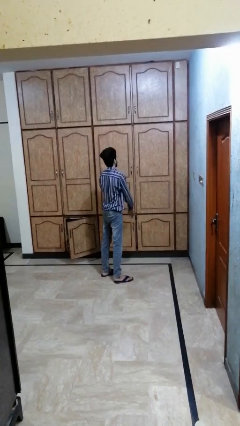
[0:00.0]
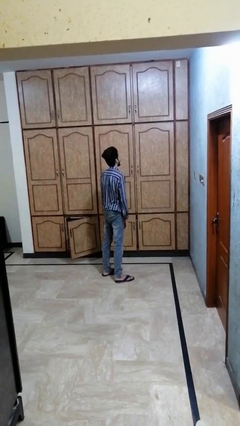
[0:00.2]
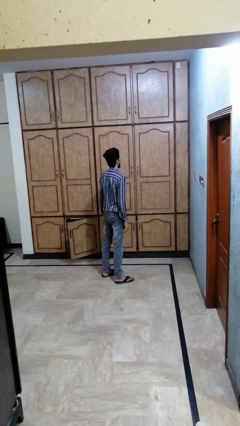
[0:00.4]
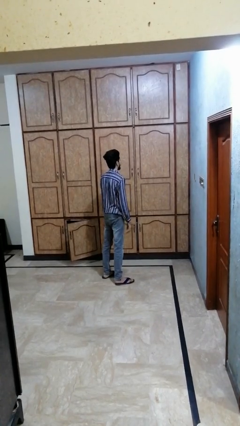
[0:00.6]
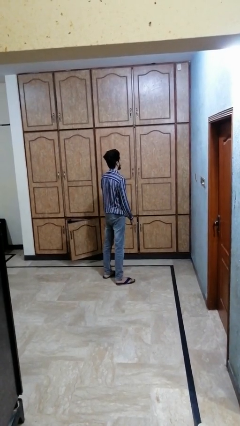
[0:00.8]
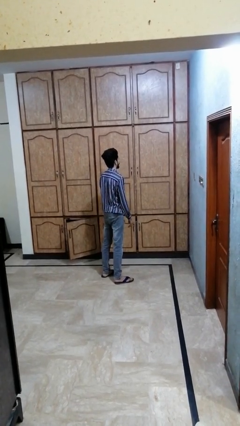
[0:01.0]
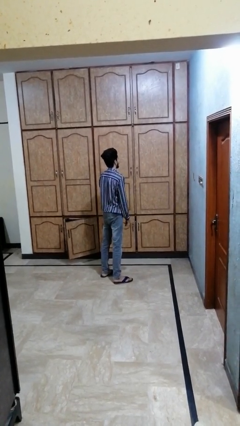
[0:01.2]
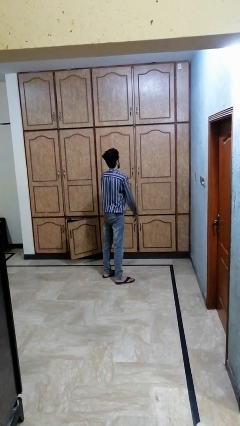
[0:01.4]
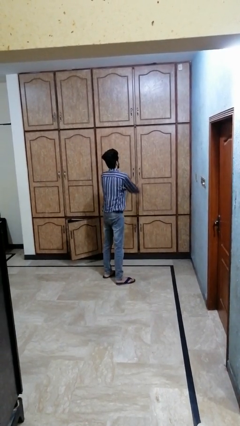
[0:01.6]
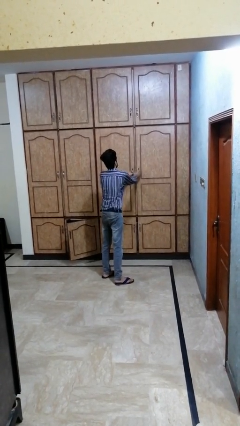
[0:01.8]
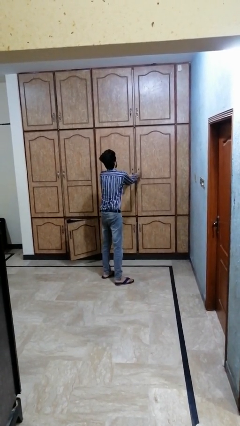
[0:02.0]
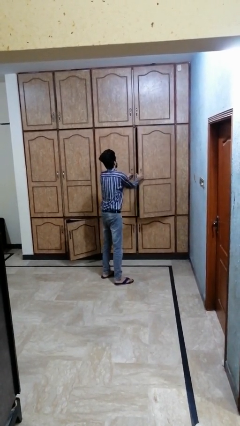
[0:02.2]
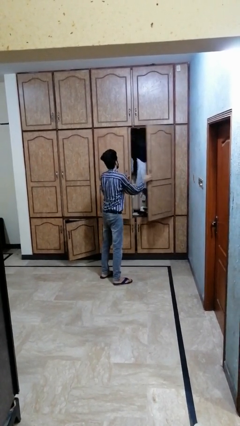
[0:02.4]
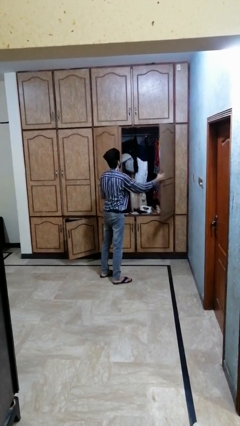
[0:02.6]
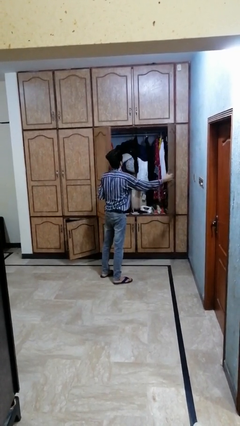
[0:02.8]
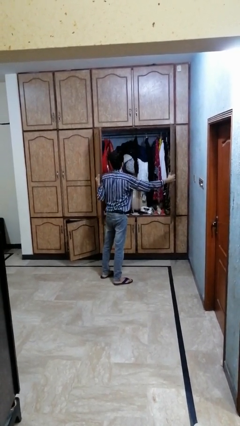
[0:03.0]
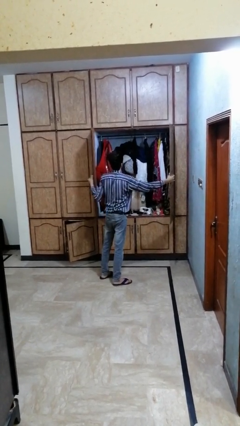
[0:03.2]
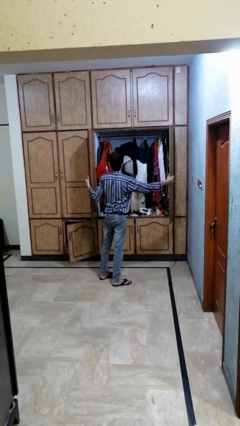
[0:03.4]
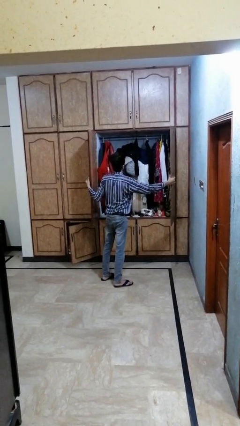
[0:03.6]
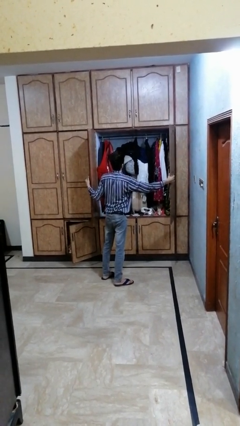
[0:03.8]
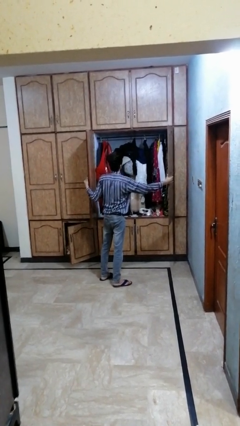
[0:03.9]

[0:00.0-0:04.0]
person opens dresser drawer

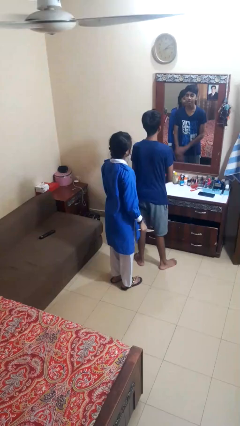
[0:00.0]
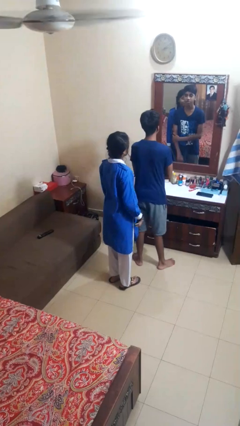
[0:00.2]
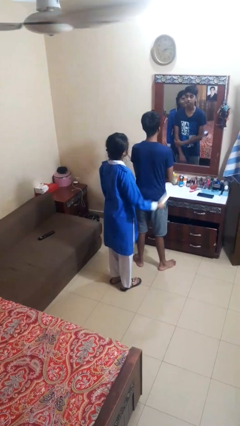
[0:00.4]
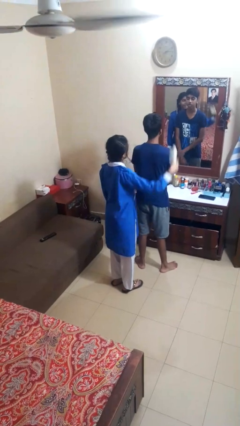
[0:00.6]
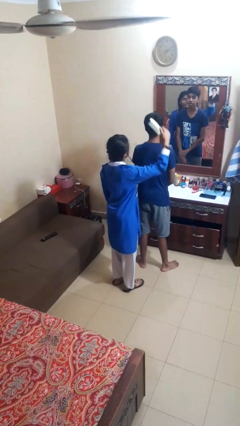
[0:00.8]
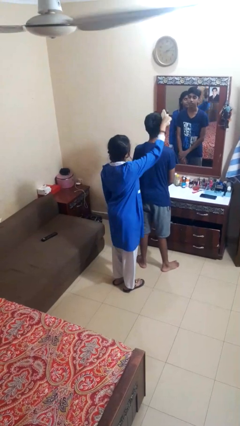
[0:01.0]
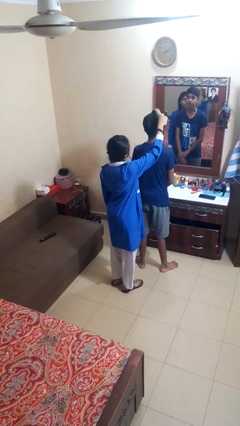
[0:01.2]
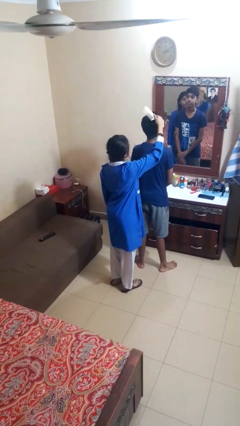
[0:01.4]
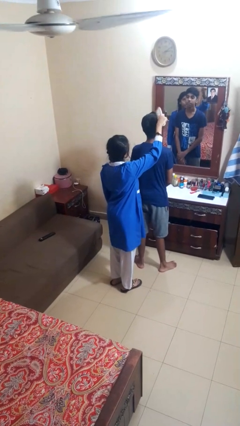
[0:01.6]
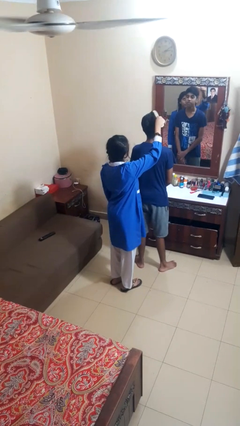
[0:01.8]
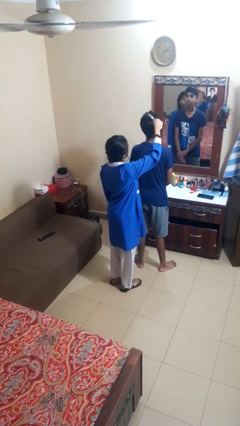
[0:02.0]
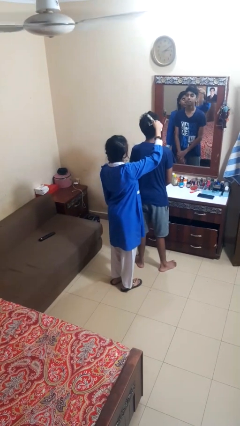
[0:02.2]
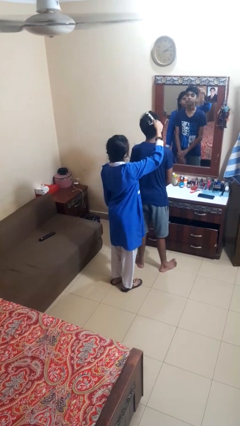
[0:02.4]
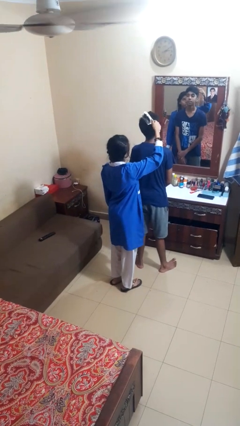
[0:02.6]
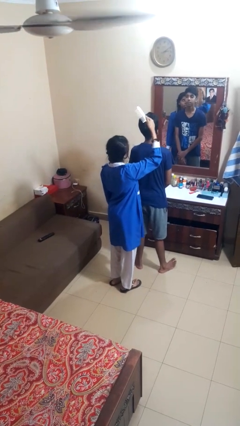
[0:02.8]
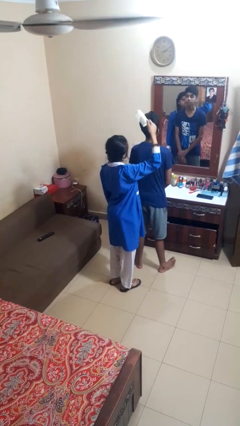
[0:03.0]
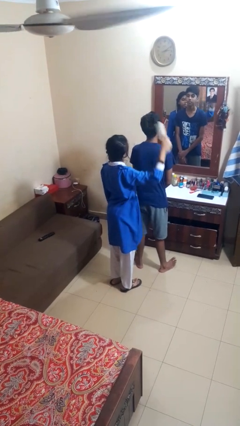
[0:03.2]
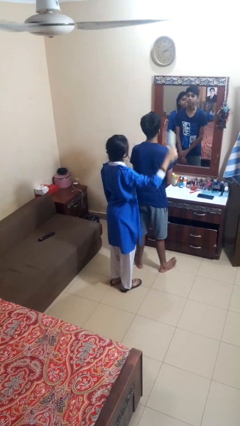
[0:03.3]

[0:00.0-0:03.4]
person brushes hair of person

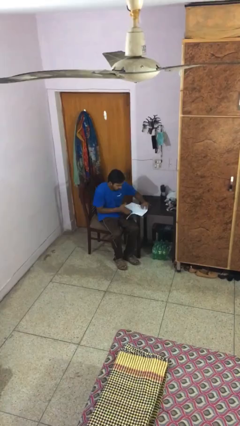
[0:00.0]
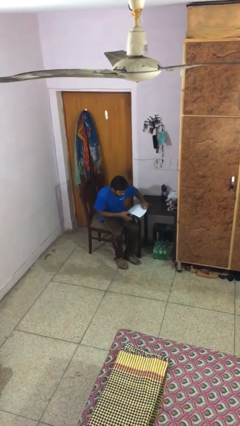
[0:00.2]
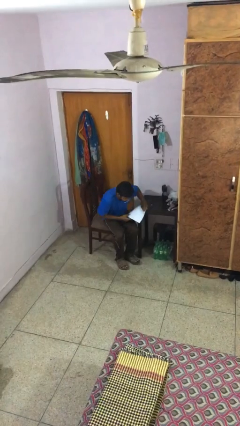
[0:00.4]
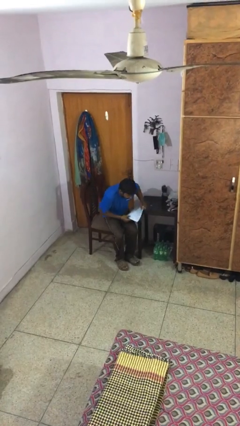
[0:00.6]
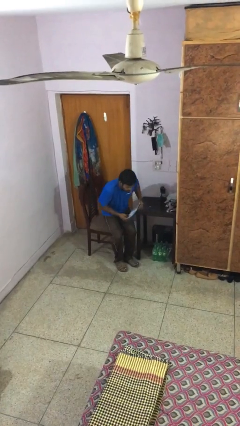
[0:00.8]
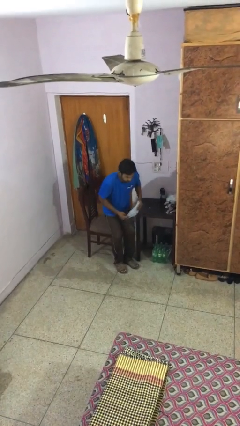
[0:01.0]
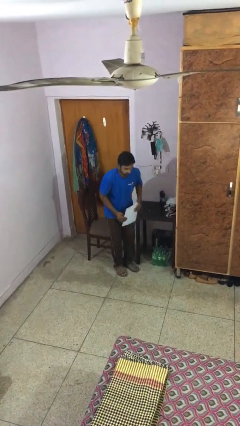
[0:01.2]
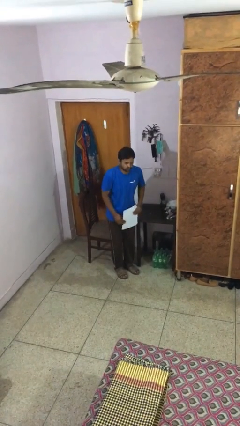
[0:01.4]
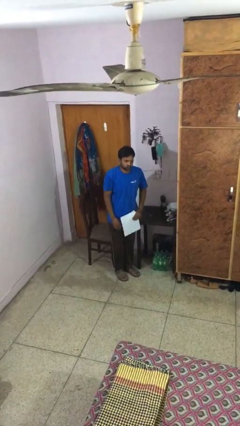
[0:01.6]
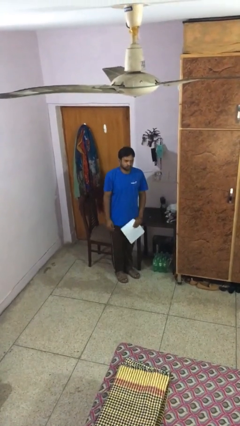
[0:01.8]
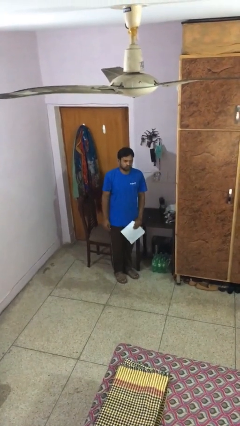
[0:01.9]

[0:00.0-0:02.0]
person stands up

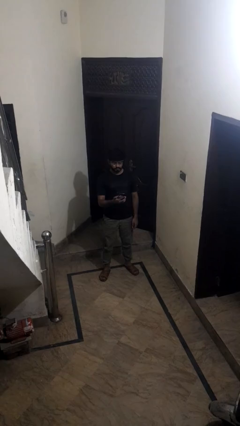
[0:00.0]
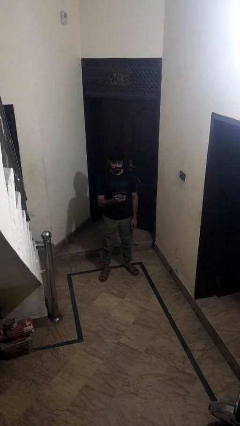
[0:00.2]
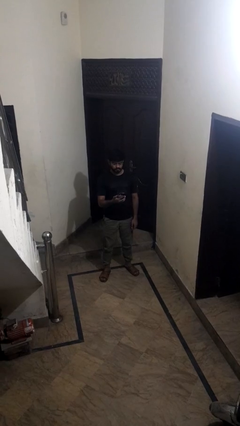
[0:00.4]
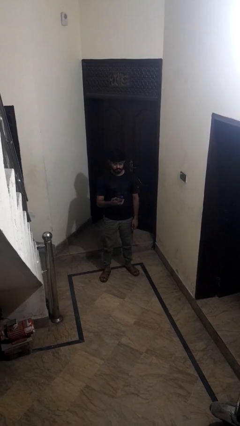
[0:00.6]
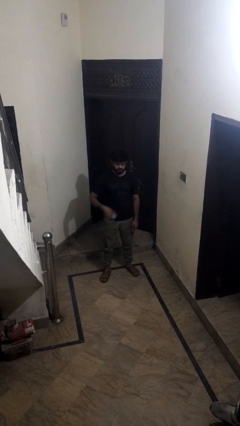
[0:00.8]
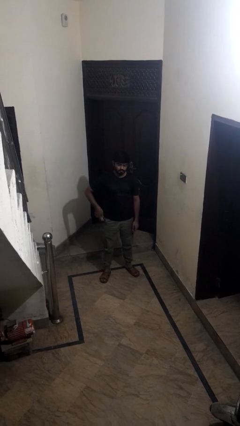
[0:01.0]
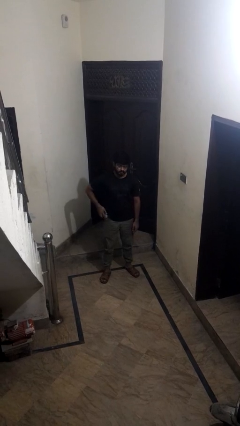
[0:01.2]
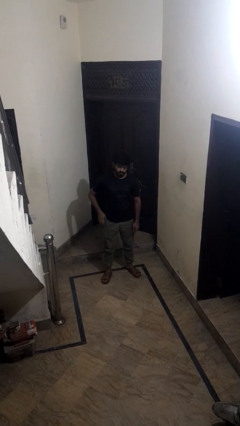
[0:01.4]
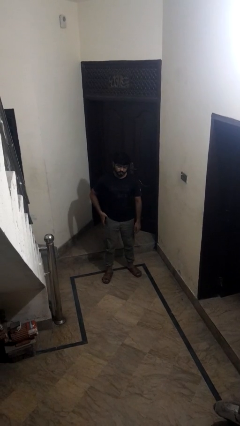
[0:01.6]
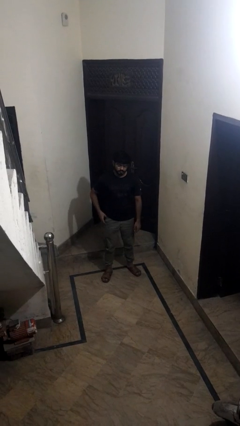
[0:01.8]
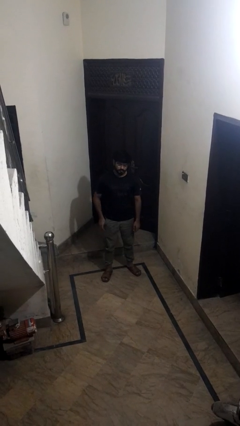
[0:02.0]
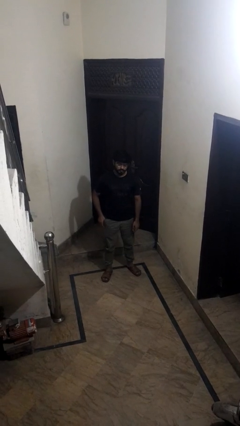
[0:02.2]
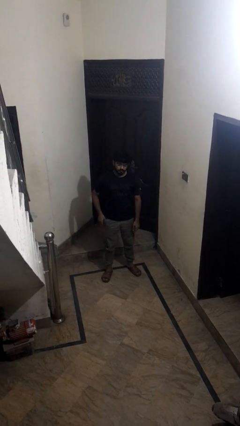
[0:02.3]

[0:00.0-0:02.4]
person puts phone into pocket

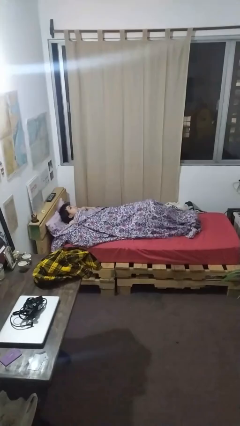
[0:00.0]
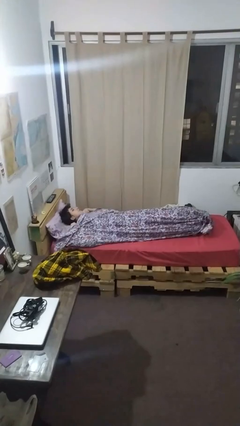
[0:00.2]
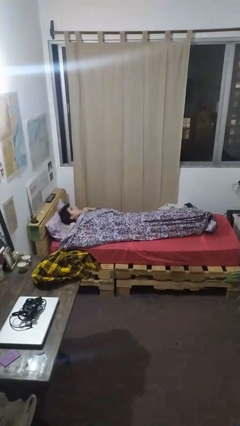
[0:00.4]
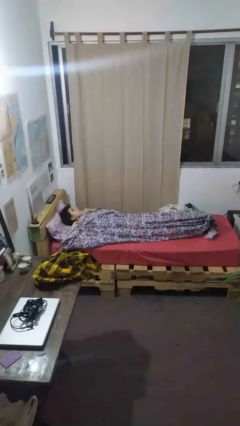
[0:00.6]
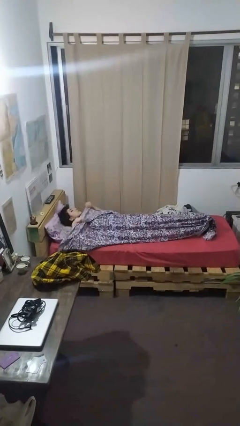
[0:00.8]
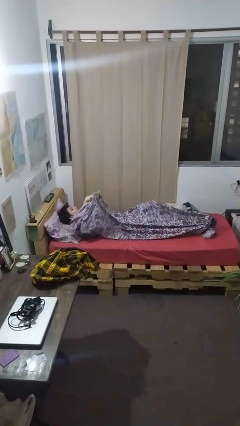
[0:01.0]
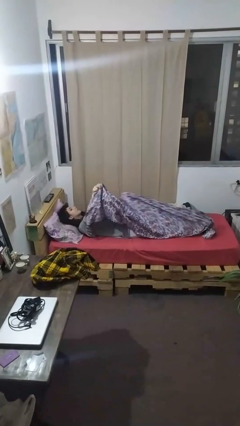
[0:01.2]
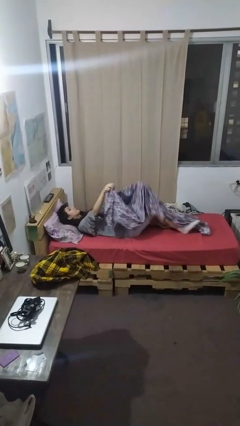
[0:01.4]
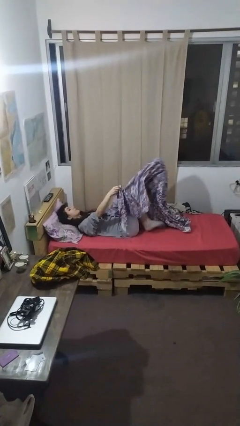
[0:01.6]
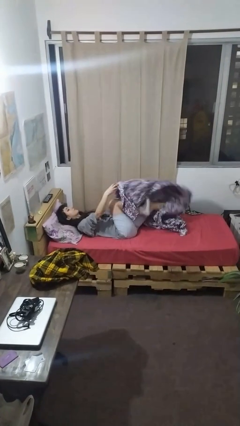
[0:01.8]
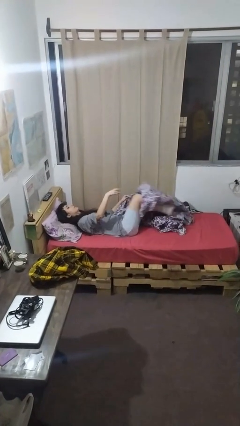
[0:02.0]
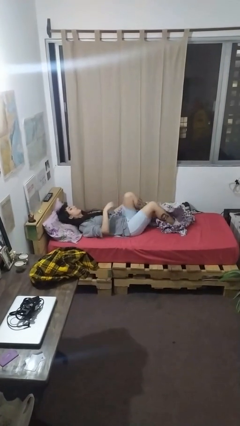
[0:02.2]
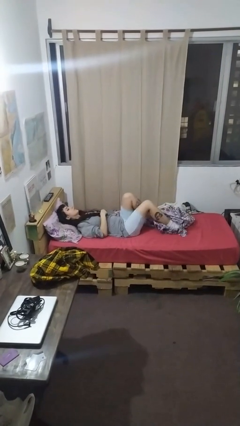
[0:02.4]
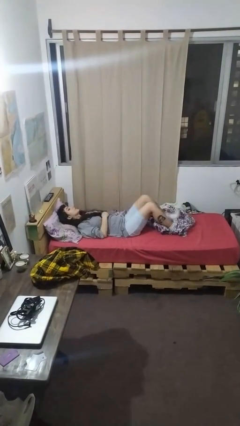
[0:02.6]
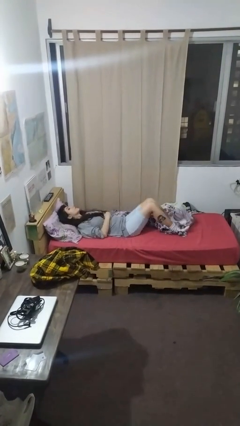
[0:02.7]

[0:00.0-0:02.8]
person uncovers with bedsheets

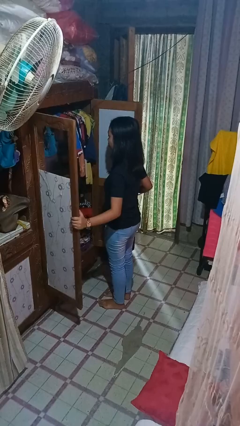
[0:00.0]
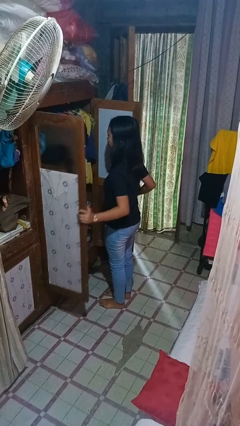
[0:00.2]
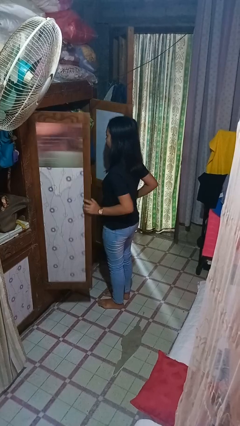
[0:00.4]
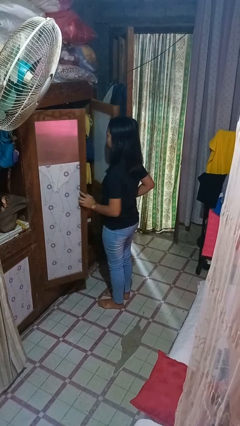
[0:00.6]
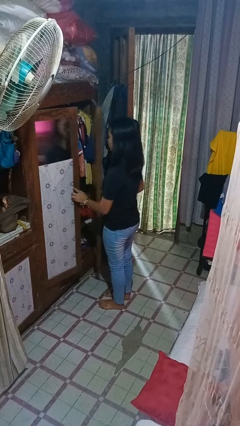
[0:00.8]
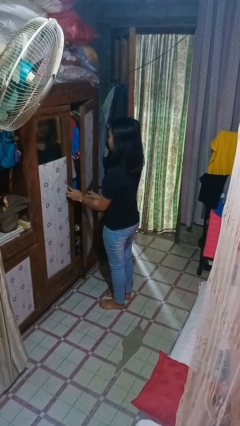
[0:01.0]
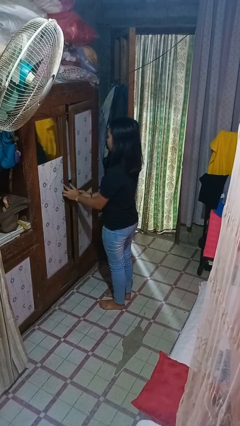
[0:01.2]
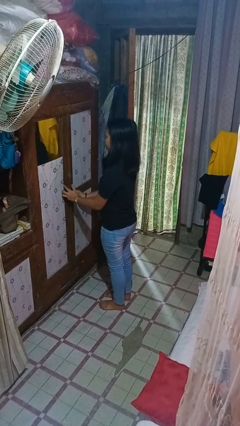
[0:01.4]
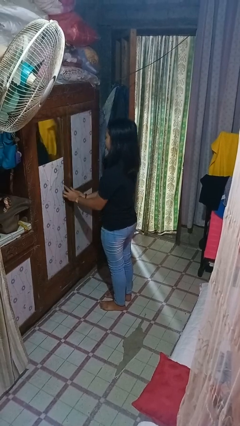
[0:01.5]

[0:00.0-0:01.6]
person closes closet door

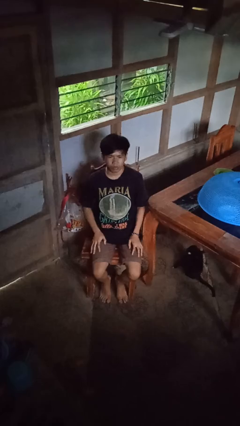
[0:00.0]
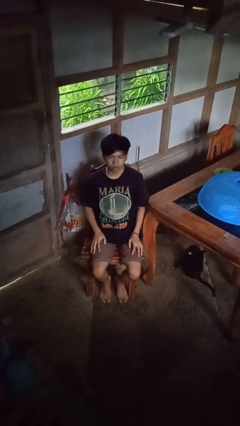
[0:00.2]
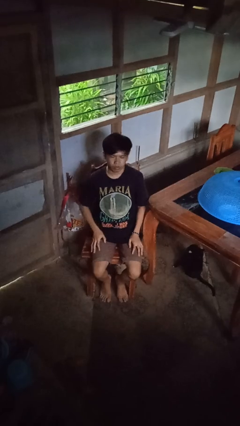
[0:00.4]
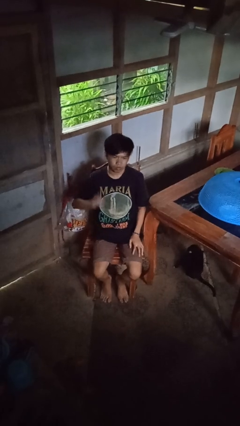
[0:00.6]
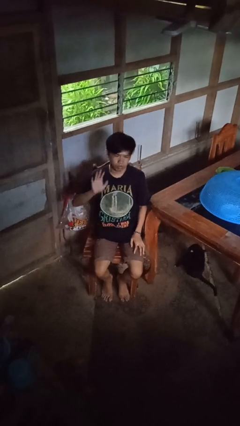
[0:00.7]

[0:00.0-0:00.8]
person gestures stop
